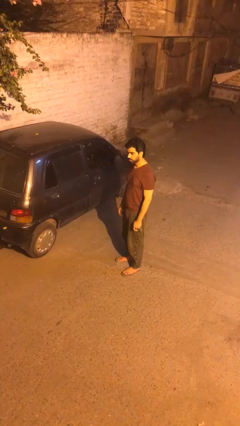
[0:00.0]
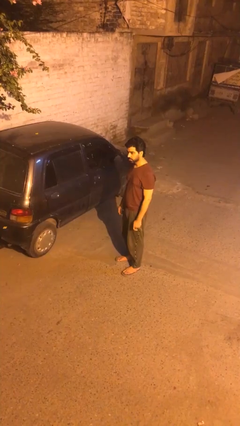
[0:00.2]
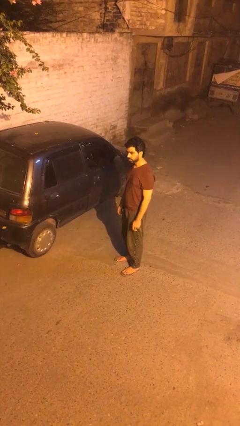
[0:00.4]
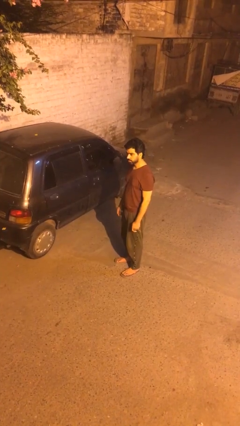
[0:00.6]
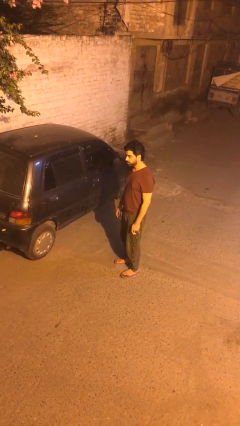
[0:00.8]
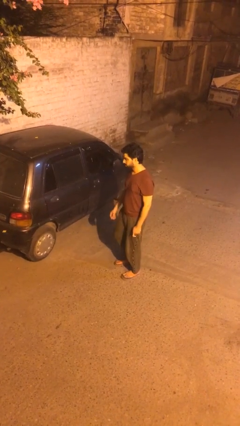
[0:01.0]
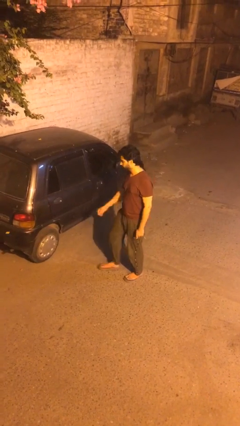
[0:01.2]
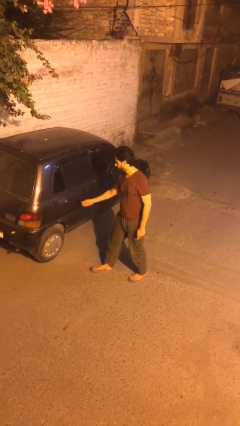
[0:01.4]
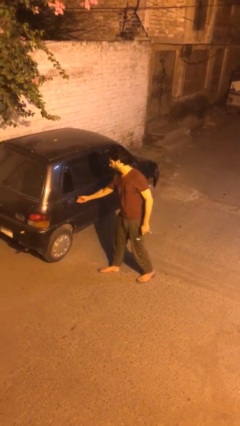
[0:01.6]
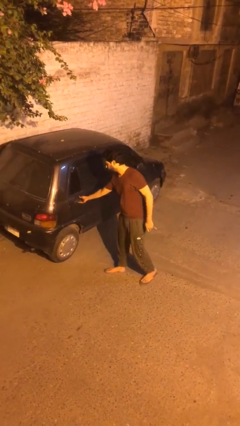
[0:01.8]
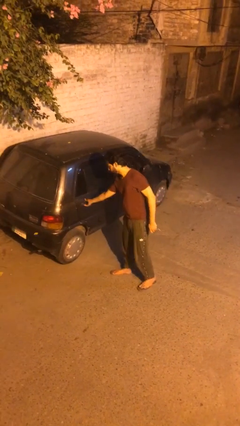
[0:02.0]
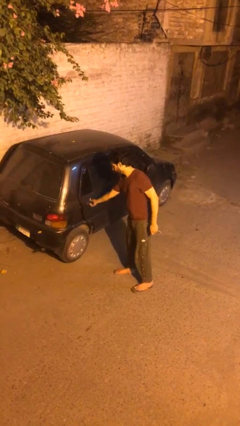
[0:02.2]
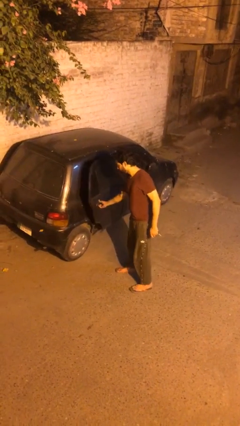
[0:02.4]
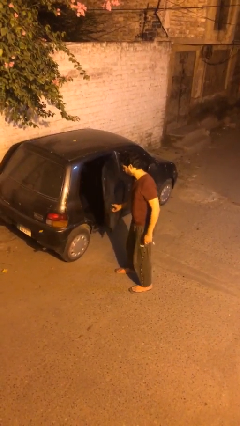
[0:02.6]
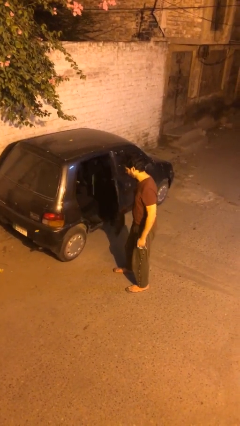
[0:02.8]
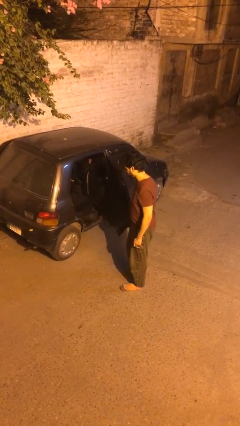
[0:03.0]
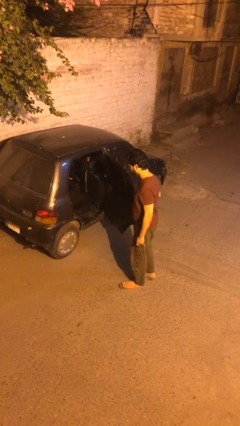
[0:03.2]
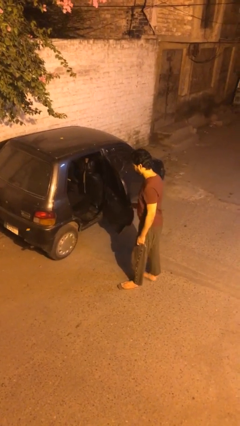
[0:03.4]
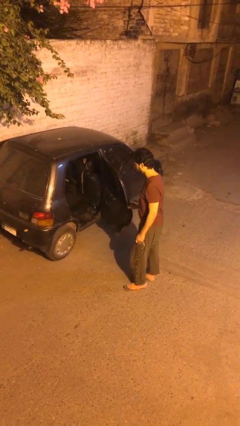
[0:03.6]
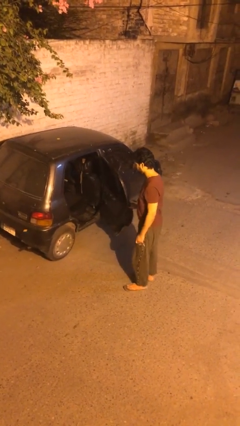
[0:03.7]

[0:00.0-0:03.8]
person opens car door

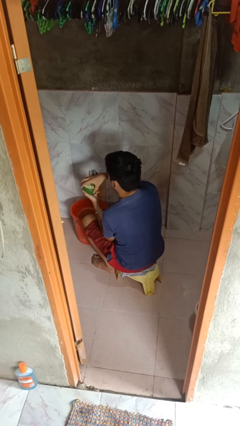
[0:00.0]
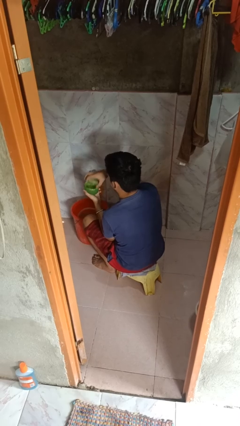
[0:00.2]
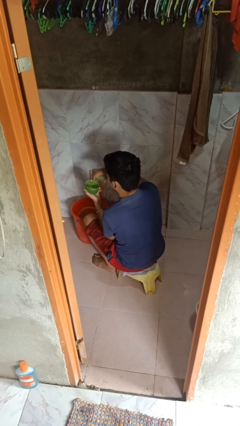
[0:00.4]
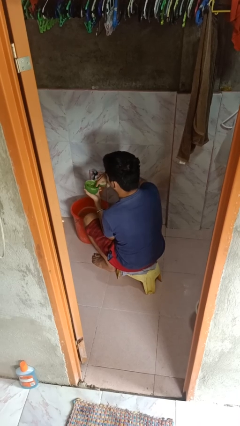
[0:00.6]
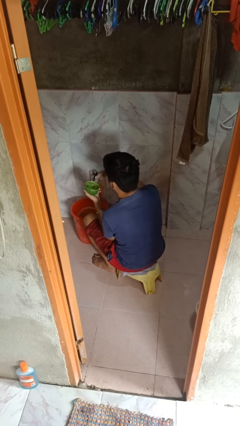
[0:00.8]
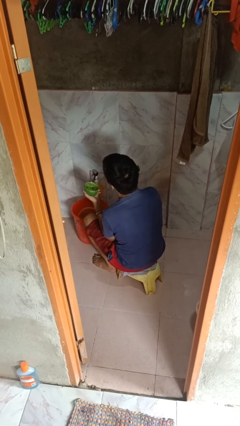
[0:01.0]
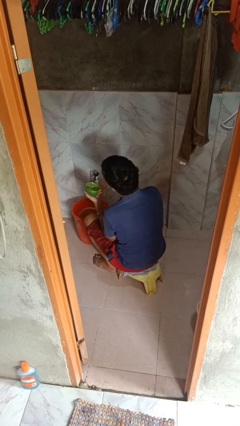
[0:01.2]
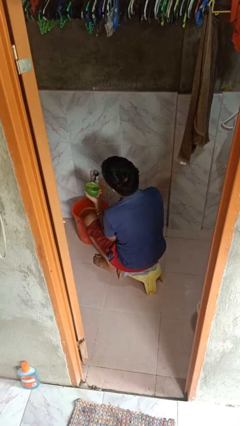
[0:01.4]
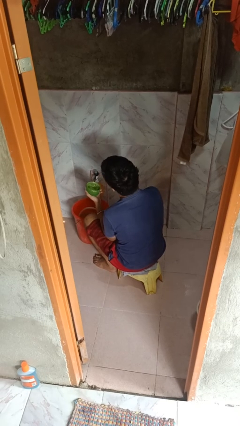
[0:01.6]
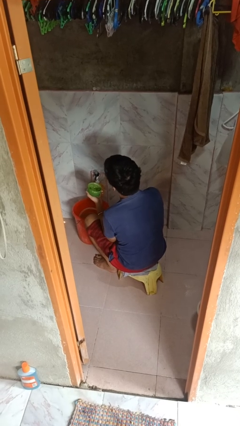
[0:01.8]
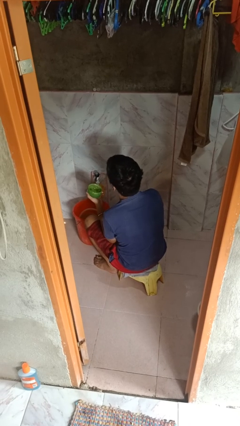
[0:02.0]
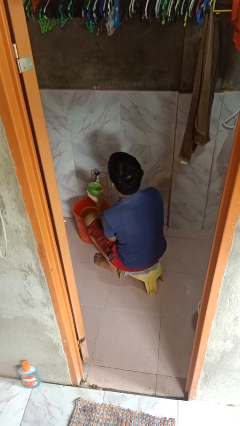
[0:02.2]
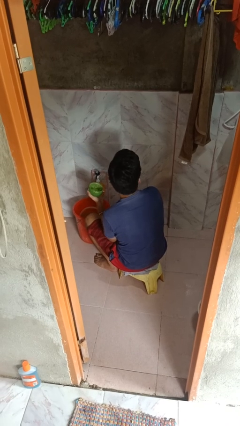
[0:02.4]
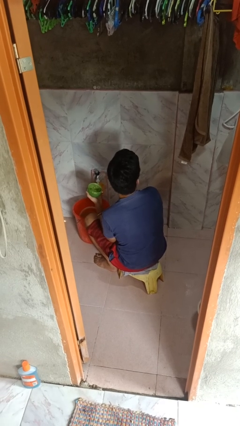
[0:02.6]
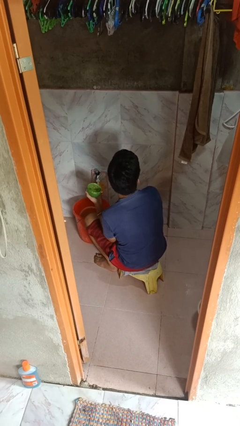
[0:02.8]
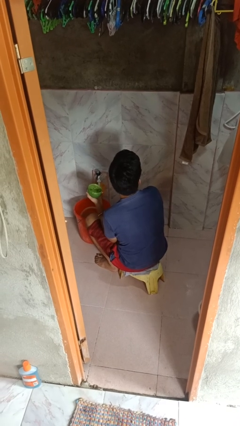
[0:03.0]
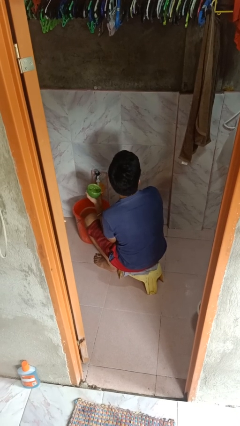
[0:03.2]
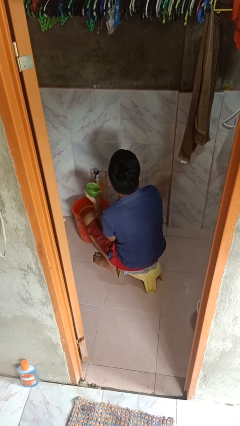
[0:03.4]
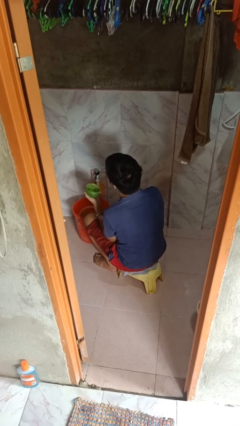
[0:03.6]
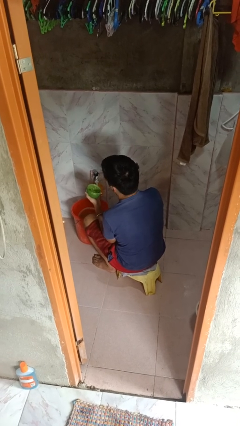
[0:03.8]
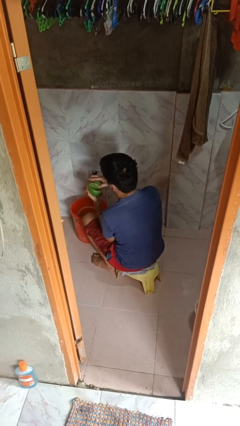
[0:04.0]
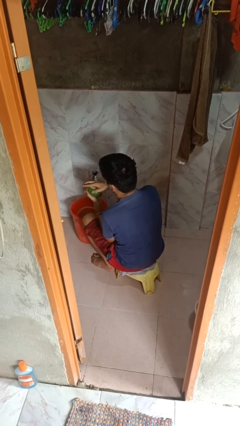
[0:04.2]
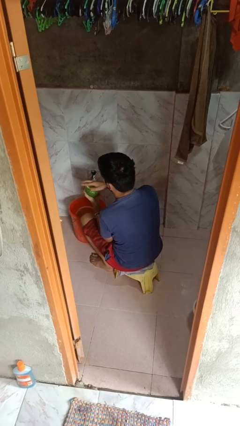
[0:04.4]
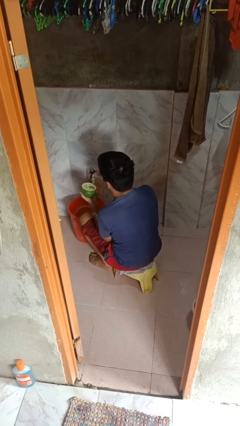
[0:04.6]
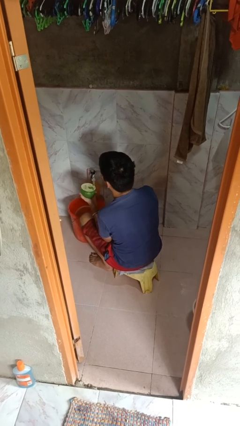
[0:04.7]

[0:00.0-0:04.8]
person applies facial moisturizer

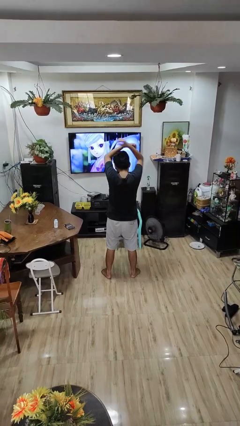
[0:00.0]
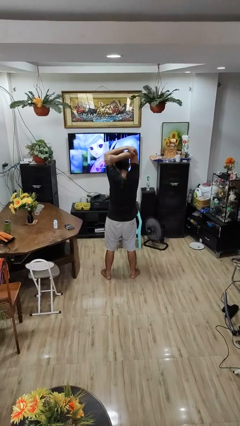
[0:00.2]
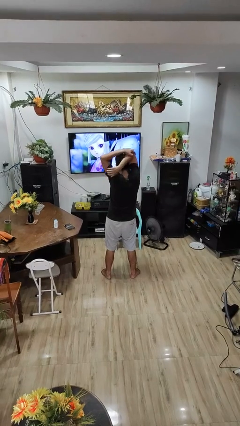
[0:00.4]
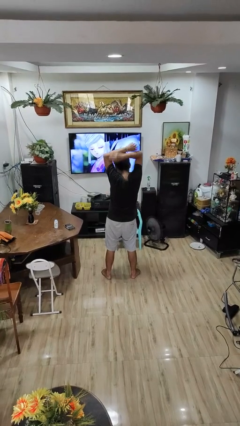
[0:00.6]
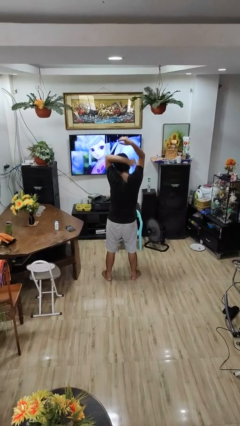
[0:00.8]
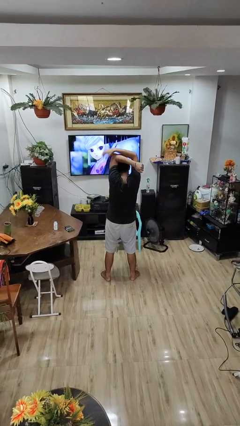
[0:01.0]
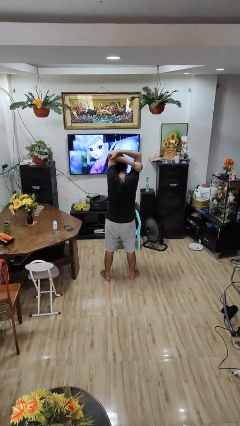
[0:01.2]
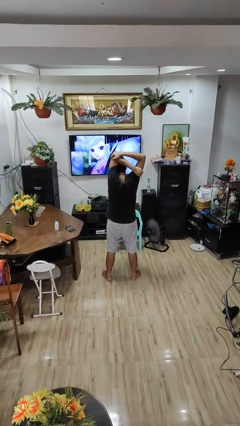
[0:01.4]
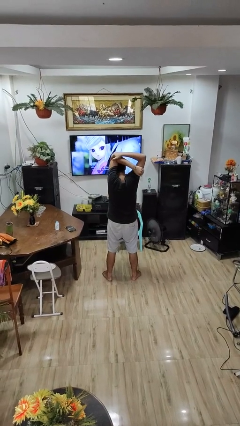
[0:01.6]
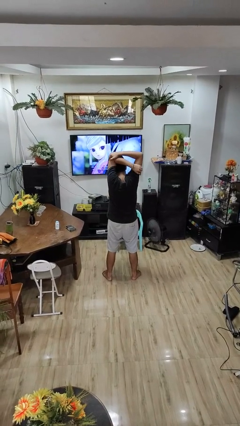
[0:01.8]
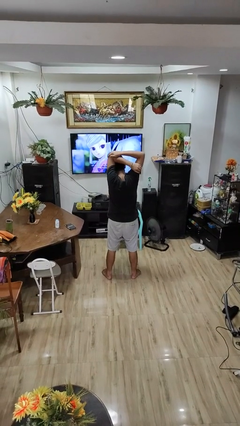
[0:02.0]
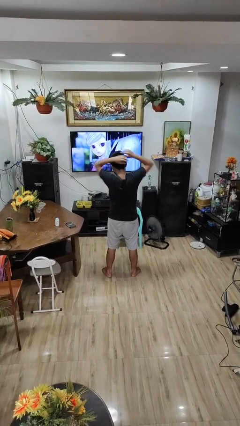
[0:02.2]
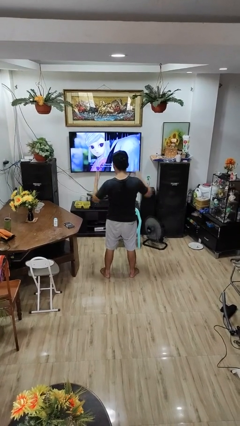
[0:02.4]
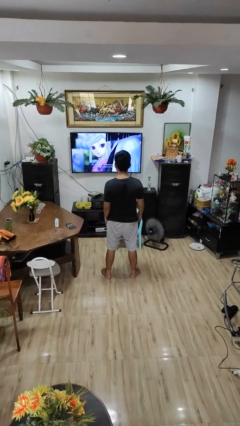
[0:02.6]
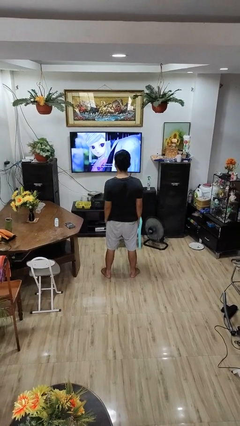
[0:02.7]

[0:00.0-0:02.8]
person stretches arms over head

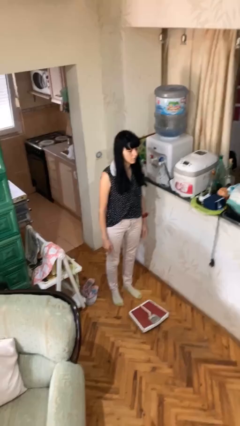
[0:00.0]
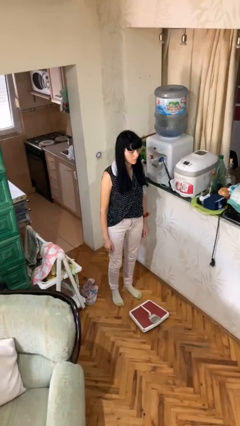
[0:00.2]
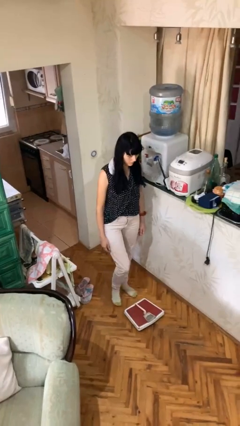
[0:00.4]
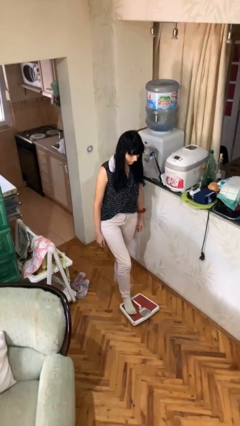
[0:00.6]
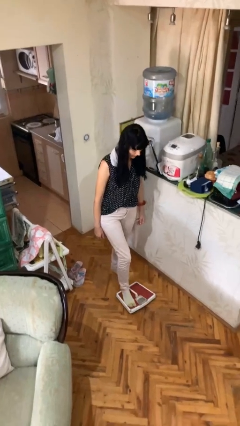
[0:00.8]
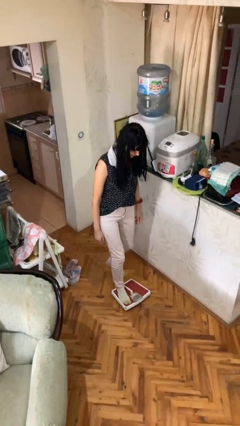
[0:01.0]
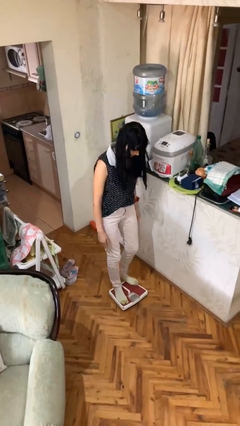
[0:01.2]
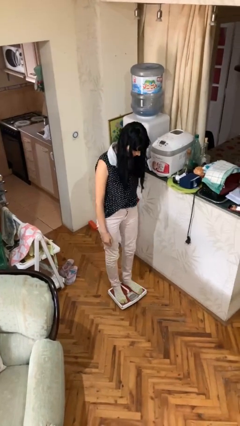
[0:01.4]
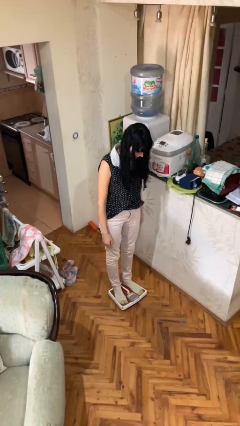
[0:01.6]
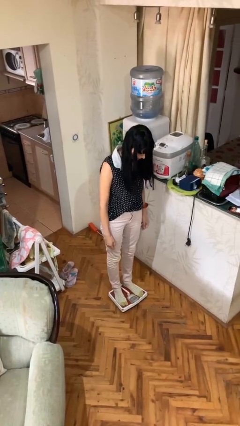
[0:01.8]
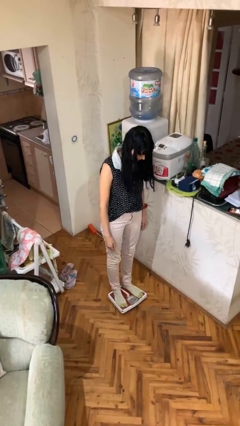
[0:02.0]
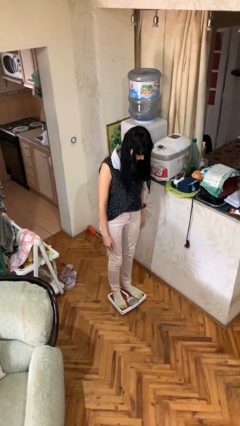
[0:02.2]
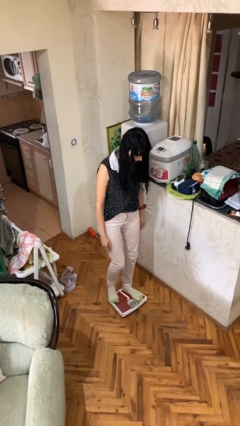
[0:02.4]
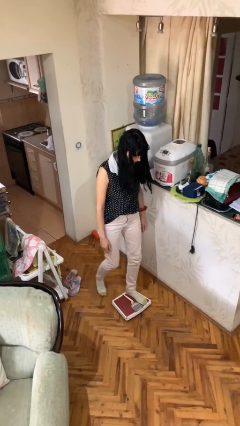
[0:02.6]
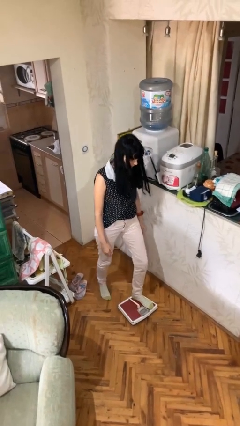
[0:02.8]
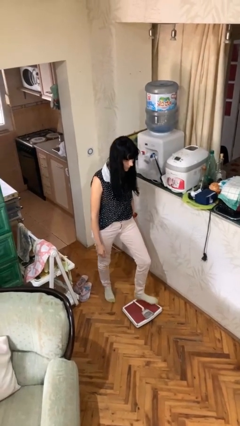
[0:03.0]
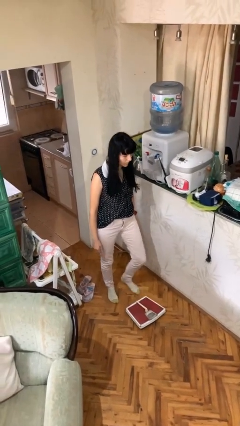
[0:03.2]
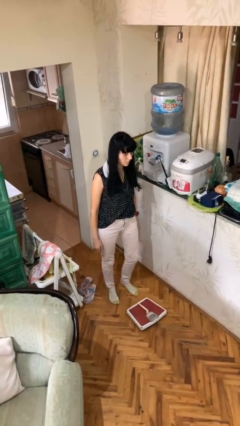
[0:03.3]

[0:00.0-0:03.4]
person uses bodyweight scale

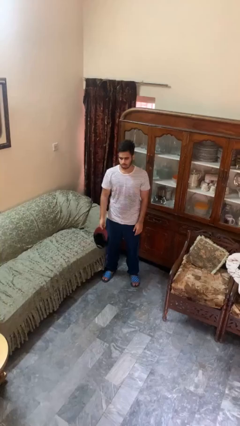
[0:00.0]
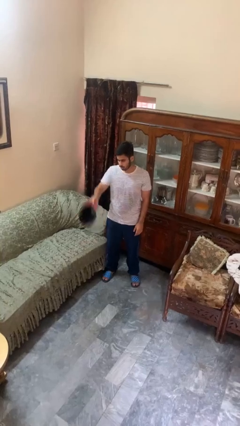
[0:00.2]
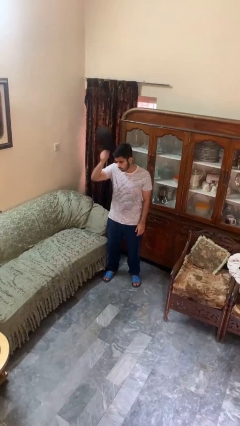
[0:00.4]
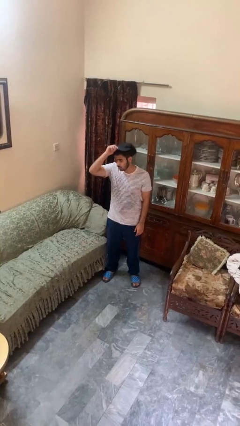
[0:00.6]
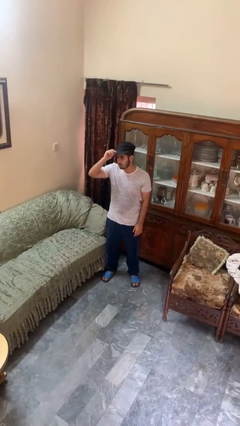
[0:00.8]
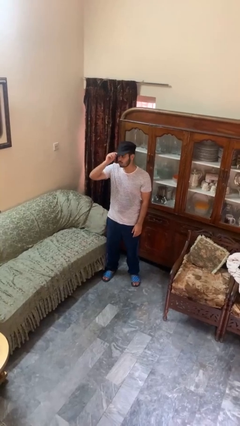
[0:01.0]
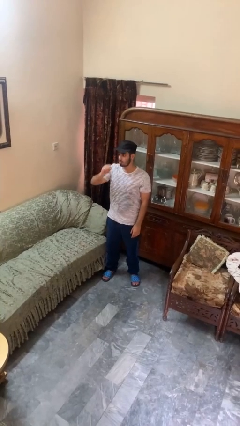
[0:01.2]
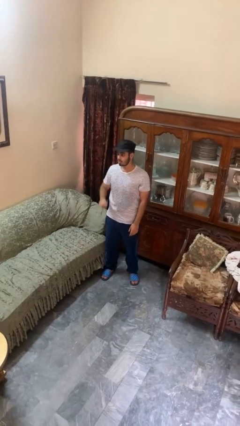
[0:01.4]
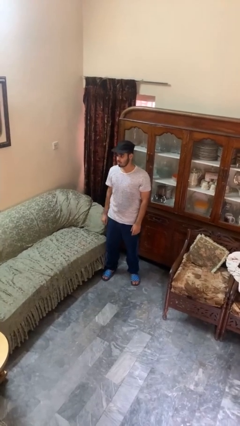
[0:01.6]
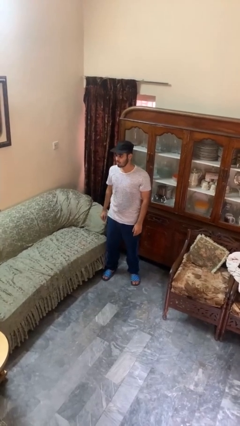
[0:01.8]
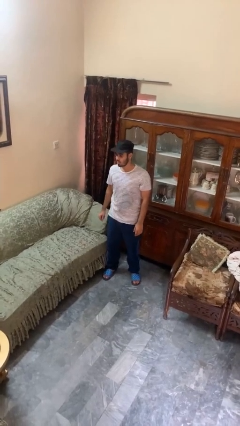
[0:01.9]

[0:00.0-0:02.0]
person puts on hat
